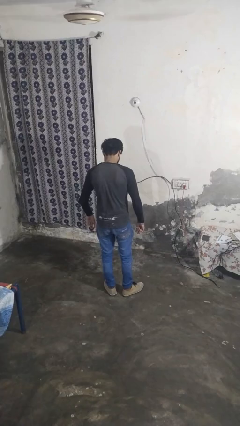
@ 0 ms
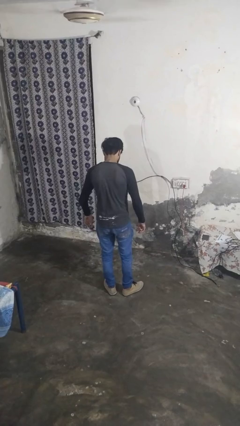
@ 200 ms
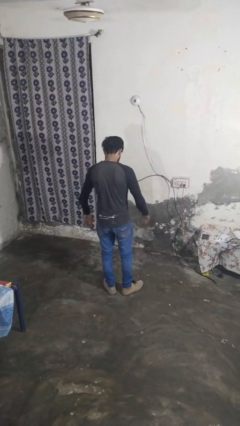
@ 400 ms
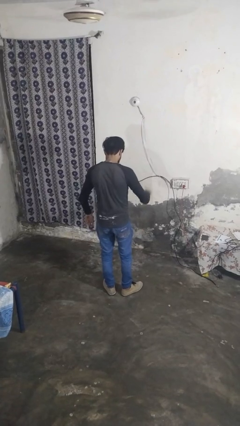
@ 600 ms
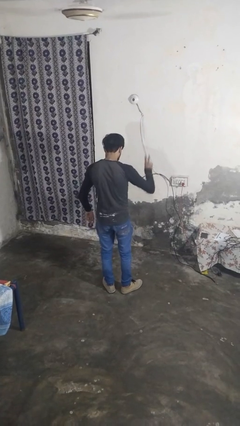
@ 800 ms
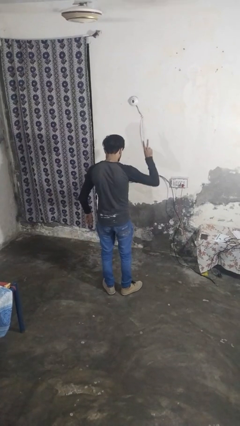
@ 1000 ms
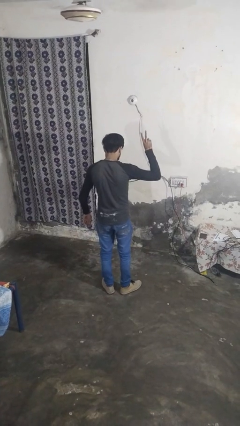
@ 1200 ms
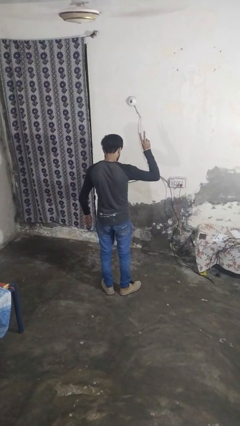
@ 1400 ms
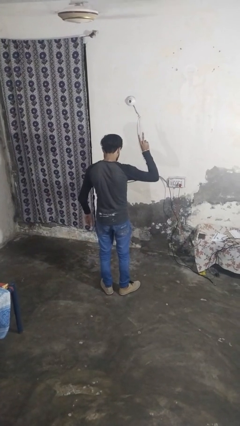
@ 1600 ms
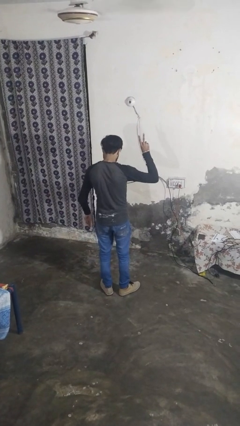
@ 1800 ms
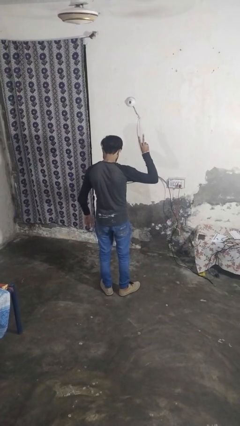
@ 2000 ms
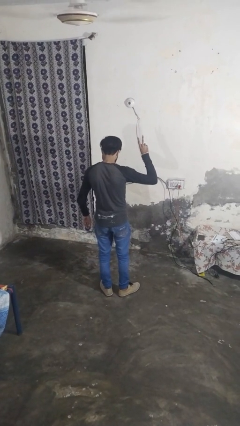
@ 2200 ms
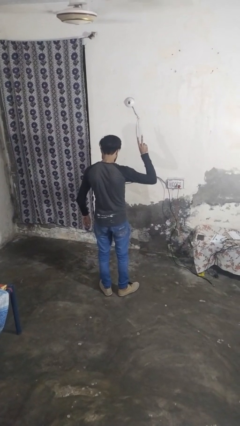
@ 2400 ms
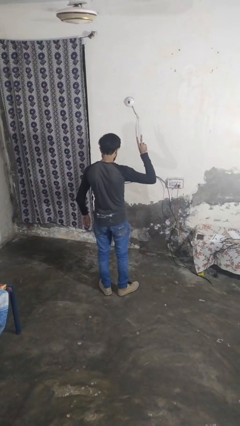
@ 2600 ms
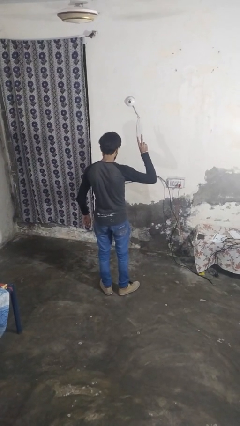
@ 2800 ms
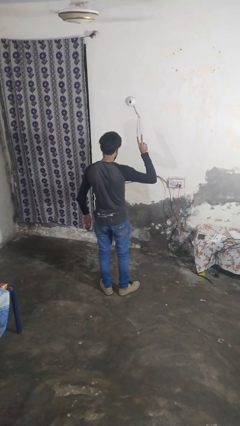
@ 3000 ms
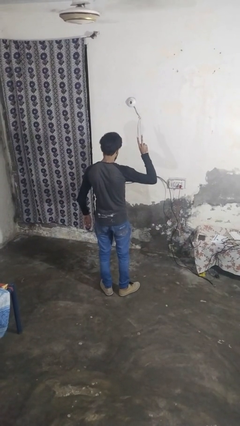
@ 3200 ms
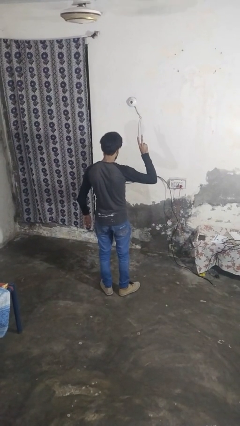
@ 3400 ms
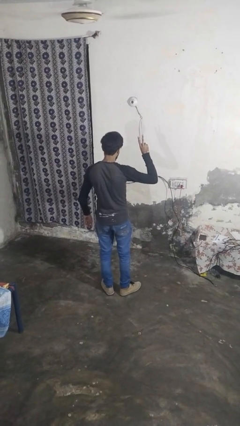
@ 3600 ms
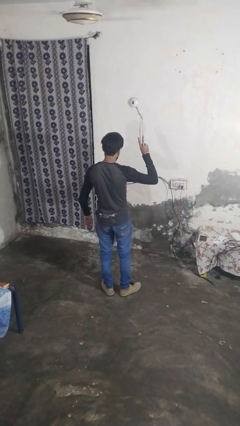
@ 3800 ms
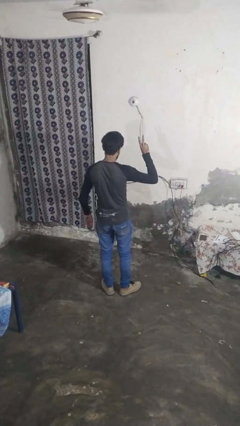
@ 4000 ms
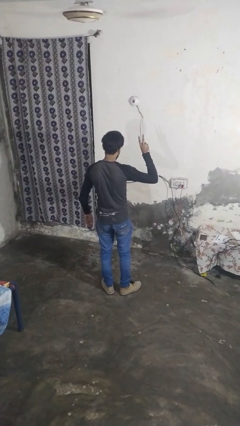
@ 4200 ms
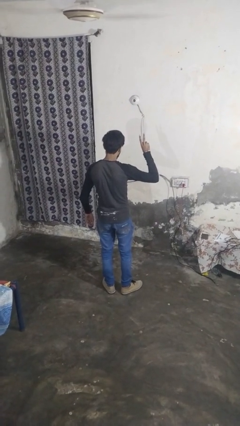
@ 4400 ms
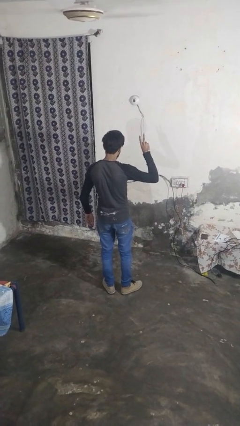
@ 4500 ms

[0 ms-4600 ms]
person gestures peace

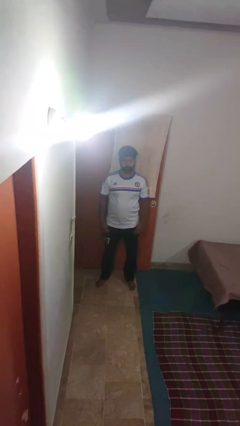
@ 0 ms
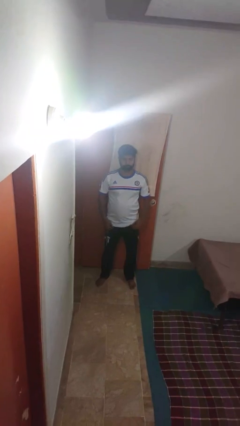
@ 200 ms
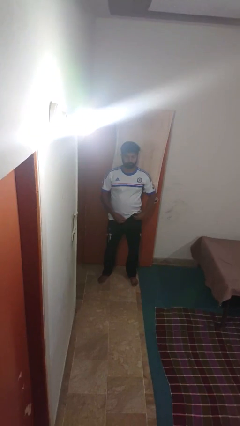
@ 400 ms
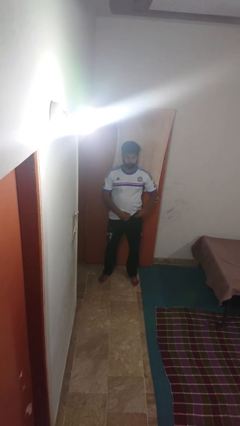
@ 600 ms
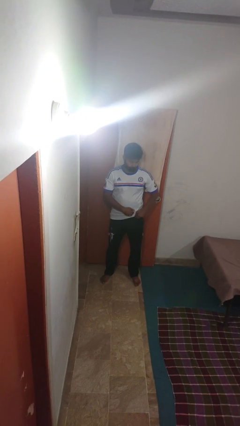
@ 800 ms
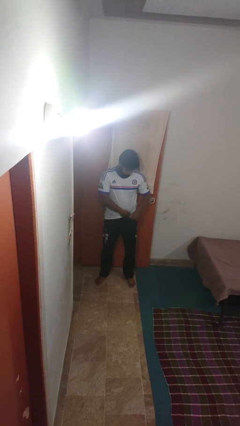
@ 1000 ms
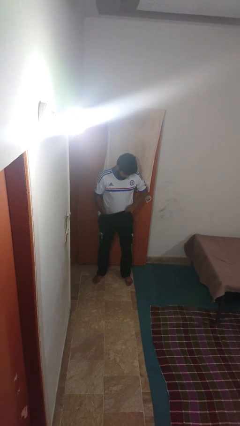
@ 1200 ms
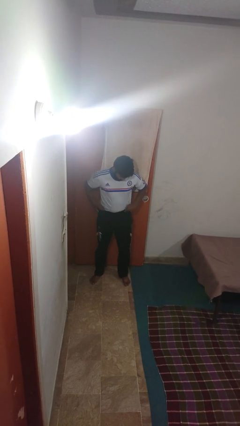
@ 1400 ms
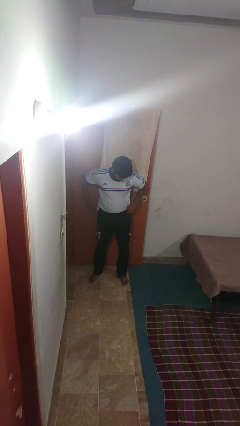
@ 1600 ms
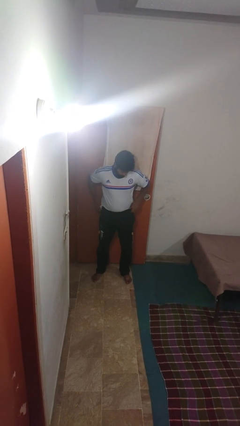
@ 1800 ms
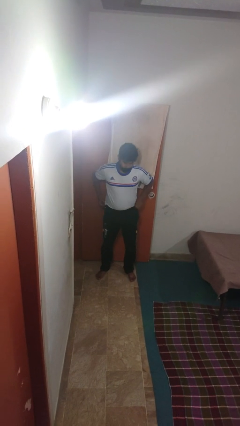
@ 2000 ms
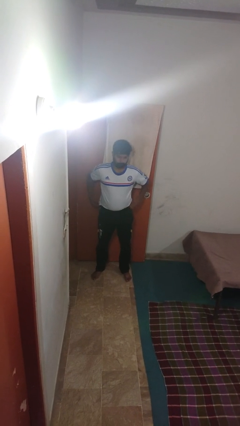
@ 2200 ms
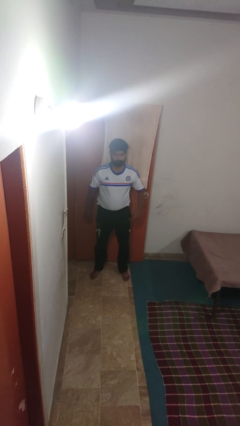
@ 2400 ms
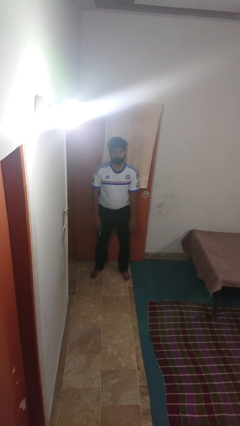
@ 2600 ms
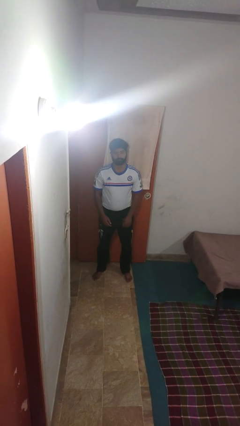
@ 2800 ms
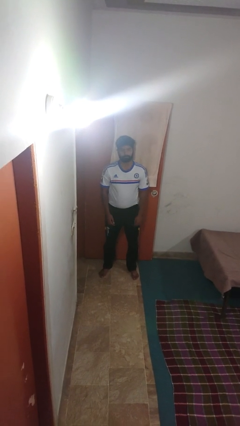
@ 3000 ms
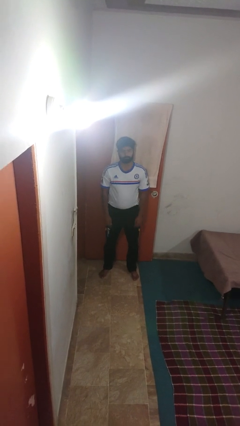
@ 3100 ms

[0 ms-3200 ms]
person tucks in shirt

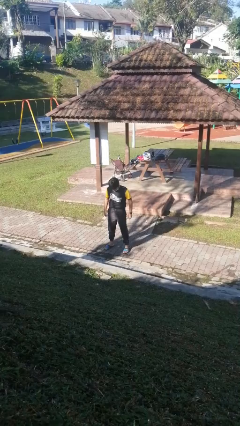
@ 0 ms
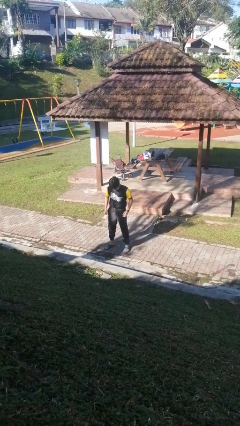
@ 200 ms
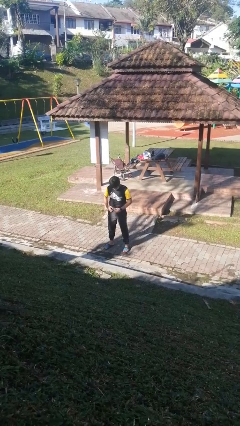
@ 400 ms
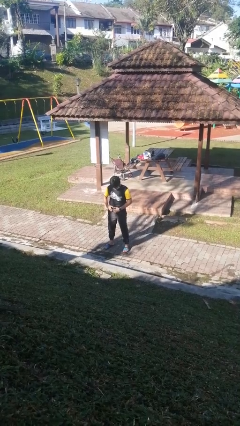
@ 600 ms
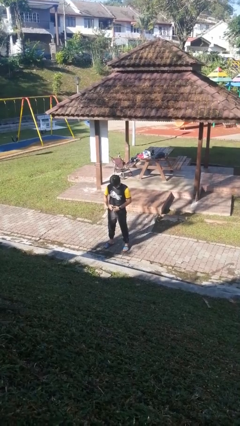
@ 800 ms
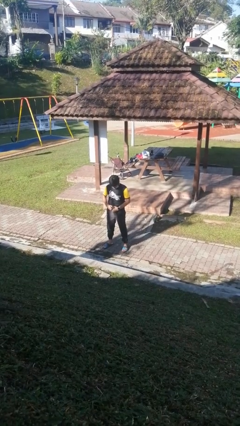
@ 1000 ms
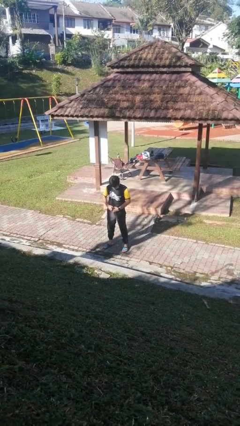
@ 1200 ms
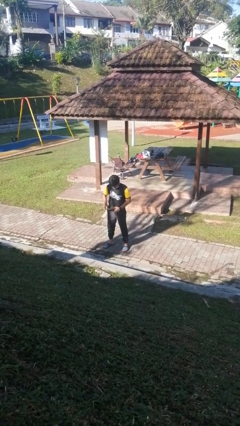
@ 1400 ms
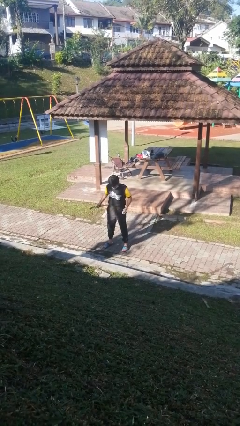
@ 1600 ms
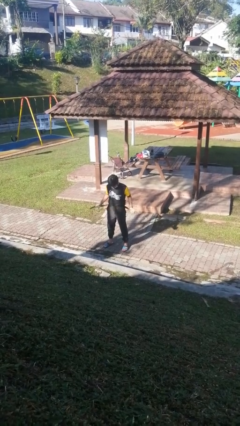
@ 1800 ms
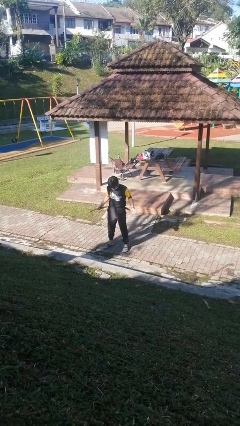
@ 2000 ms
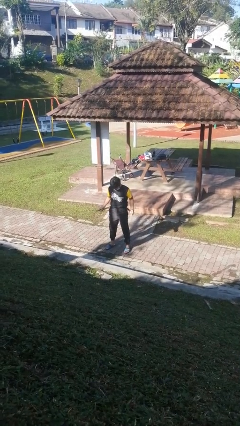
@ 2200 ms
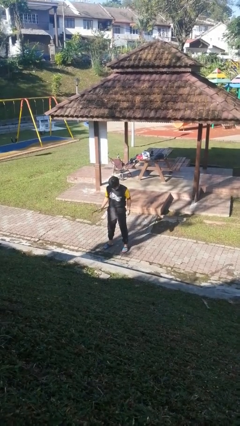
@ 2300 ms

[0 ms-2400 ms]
person takes off belt

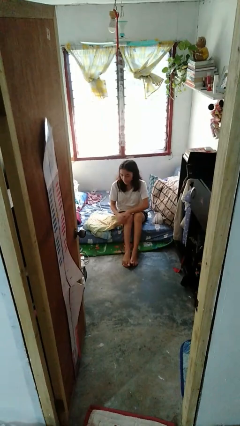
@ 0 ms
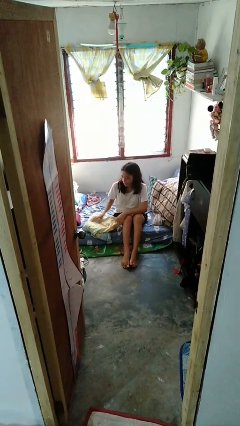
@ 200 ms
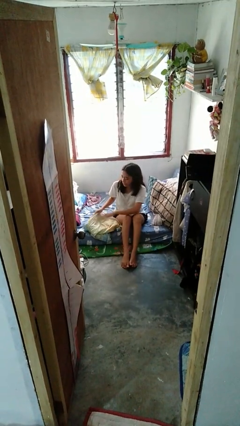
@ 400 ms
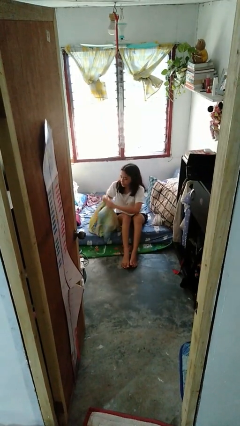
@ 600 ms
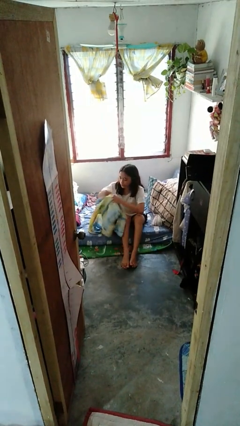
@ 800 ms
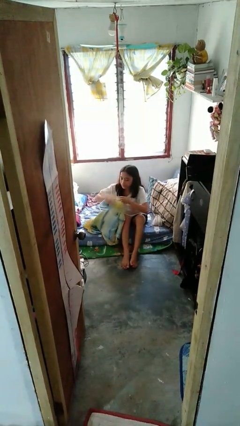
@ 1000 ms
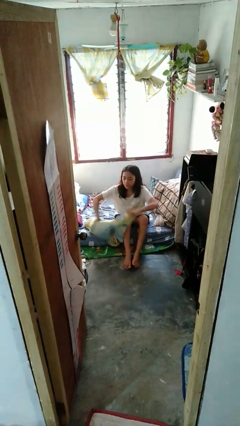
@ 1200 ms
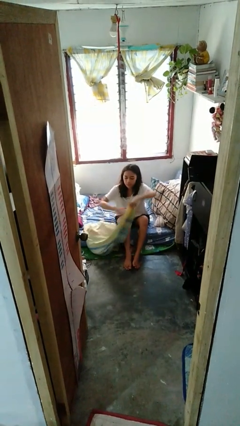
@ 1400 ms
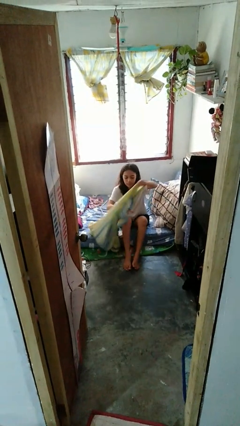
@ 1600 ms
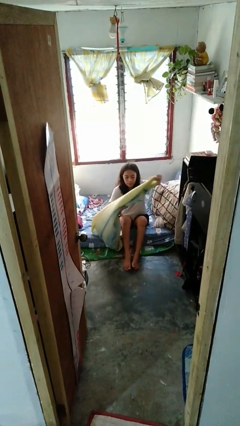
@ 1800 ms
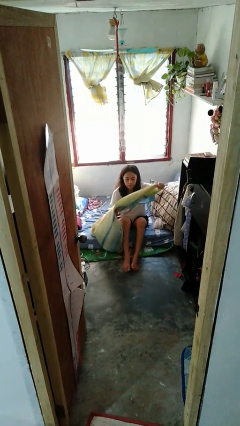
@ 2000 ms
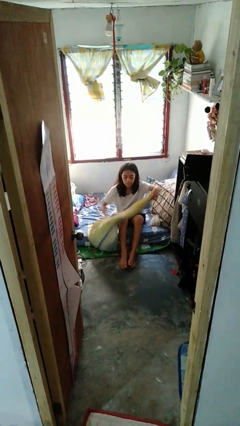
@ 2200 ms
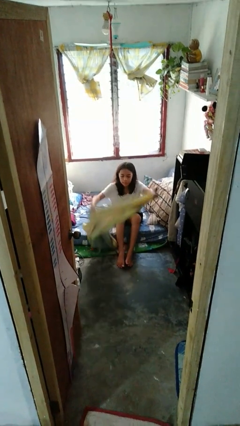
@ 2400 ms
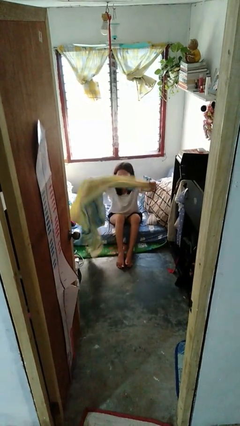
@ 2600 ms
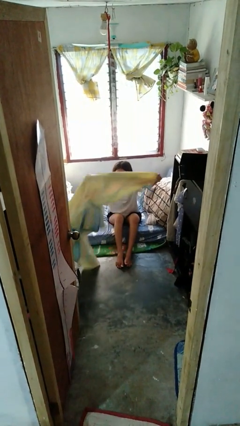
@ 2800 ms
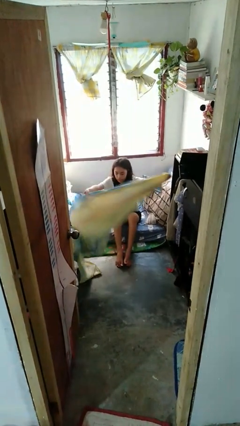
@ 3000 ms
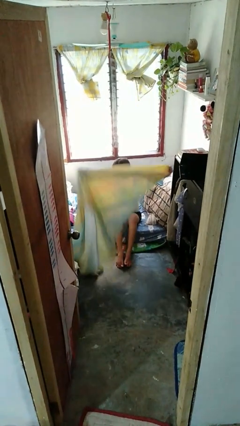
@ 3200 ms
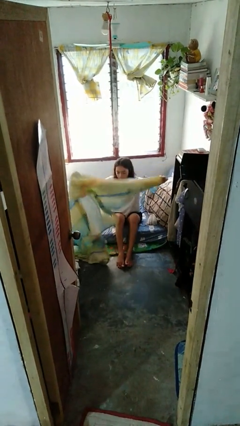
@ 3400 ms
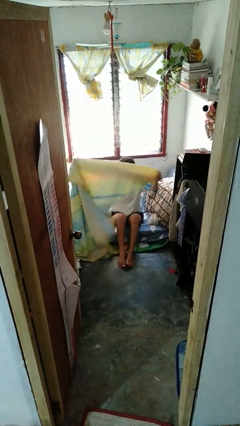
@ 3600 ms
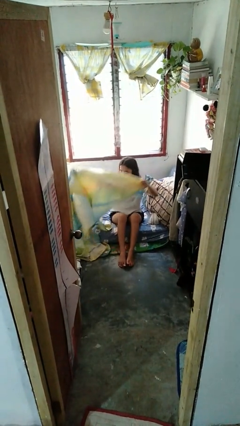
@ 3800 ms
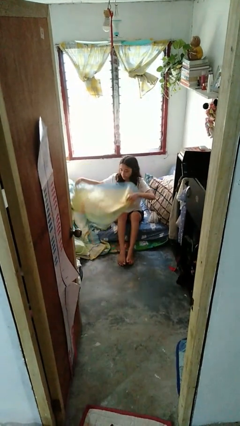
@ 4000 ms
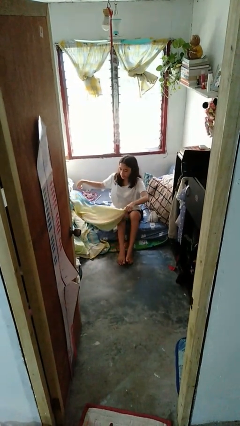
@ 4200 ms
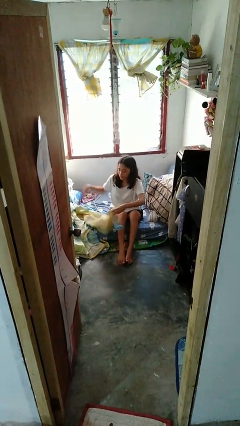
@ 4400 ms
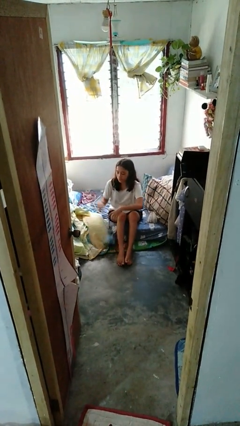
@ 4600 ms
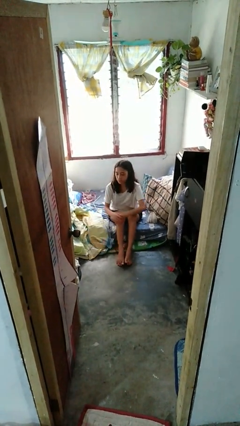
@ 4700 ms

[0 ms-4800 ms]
person unfolds blanket

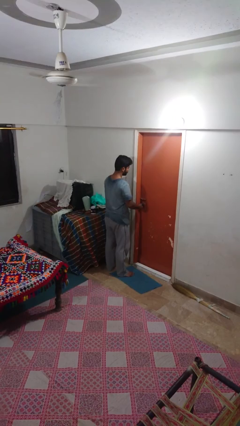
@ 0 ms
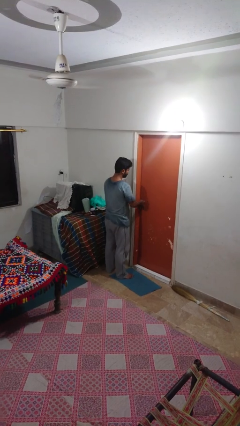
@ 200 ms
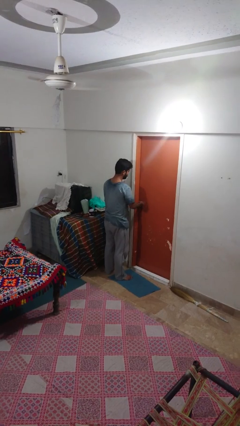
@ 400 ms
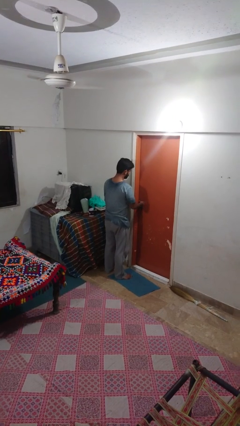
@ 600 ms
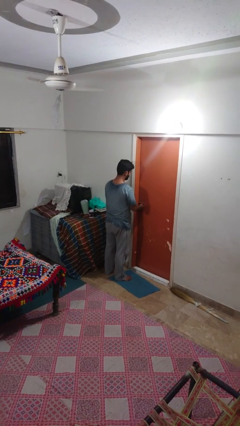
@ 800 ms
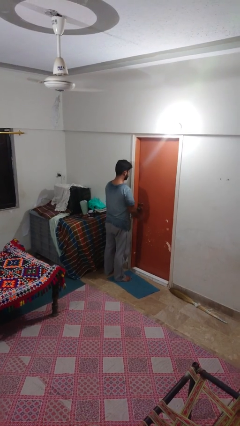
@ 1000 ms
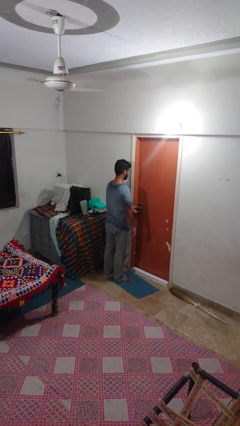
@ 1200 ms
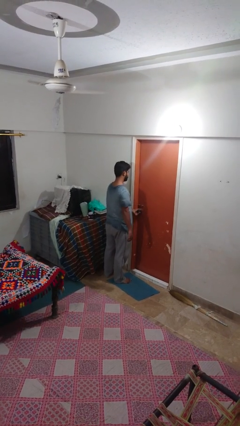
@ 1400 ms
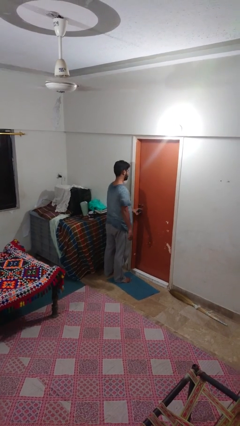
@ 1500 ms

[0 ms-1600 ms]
person unlocks door with keys

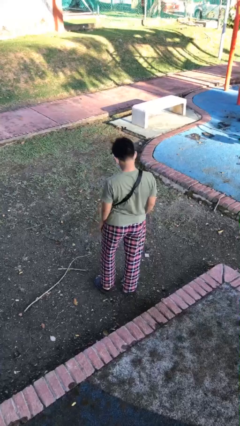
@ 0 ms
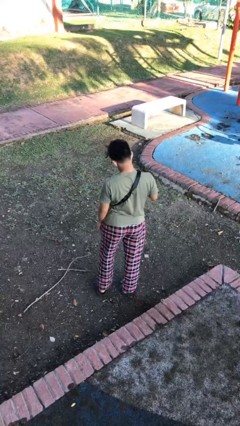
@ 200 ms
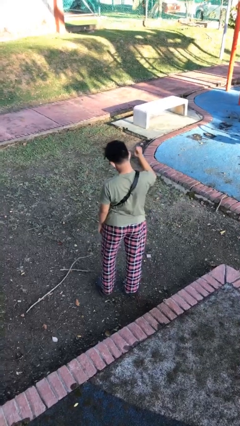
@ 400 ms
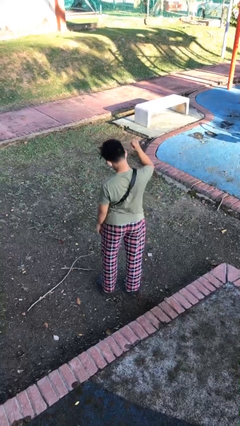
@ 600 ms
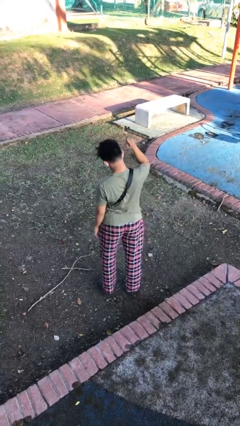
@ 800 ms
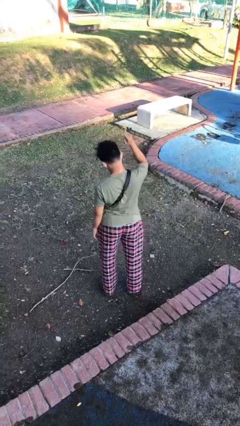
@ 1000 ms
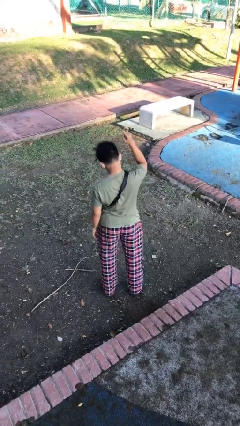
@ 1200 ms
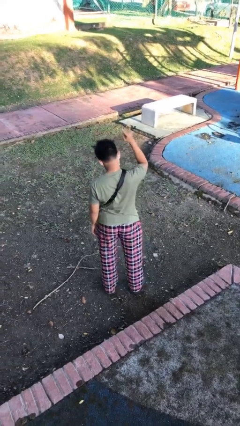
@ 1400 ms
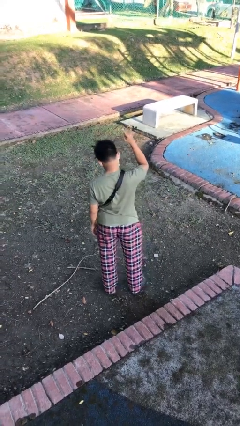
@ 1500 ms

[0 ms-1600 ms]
person gestures number one
